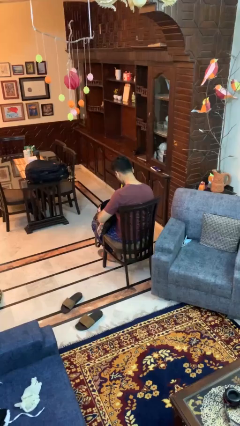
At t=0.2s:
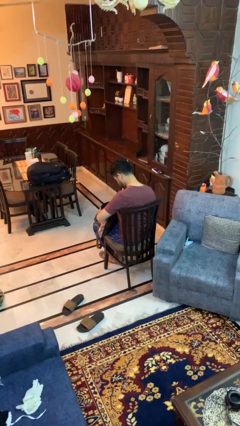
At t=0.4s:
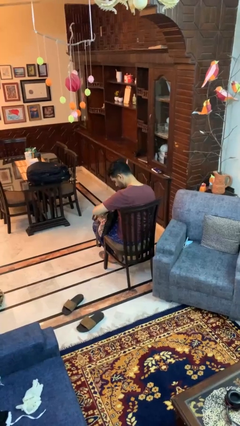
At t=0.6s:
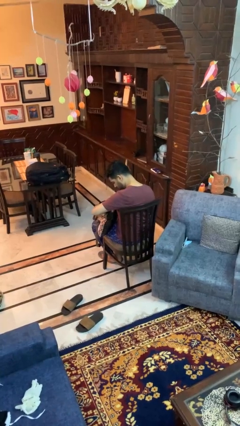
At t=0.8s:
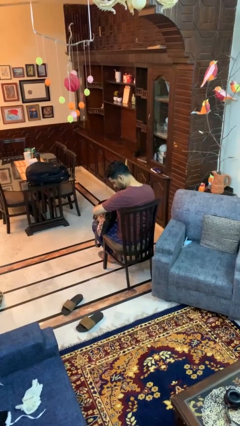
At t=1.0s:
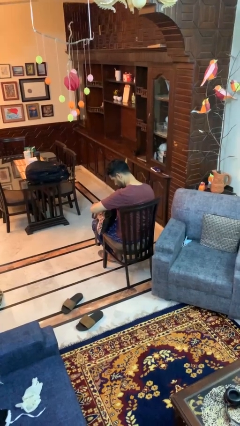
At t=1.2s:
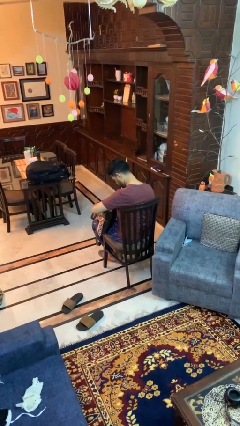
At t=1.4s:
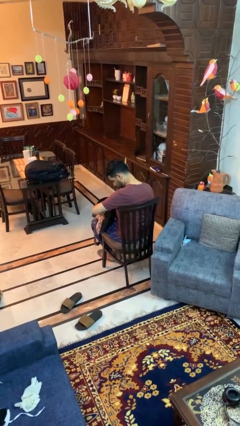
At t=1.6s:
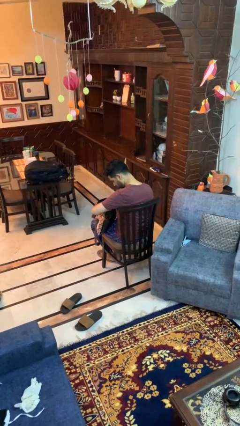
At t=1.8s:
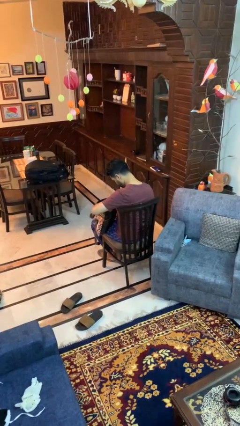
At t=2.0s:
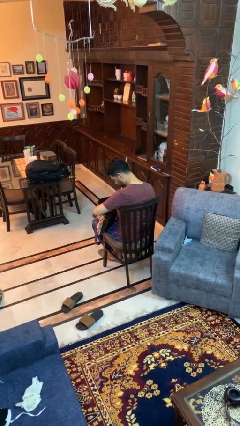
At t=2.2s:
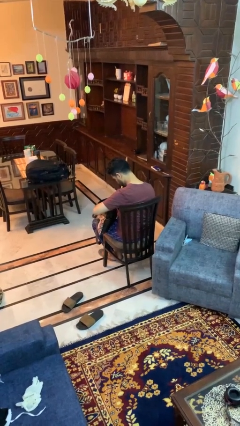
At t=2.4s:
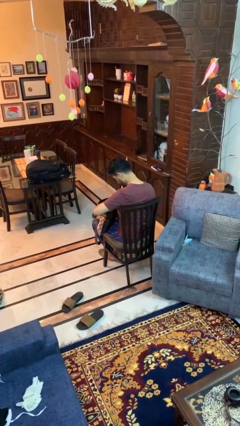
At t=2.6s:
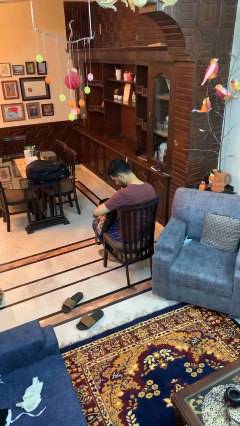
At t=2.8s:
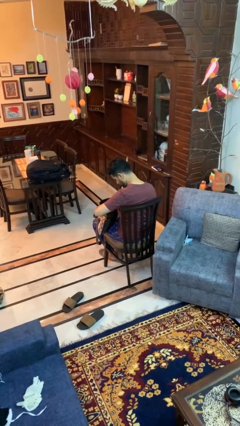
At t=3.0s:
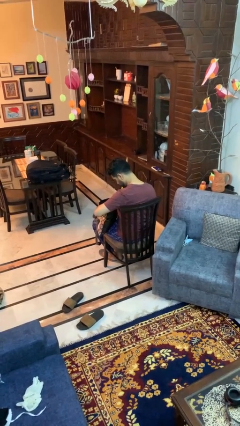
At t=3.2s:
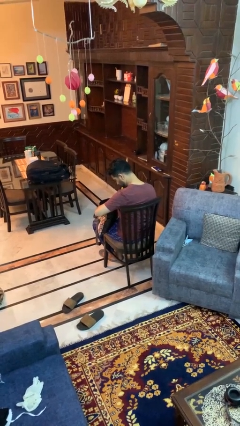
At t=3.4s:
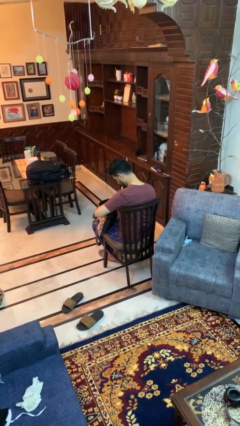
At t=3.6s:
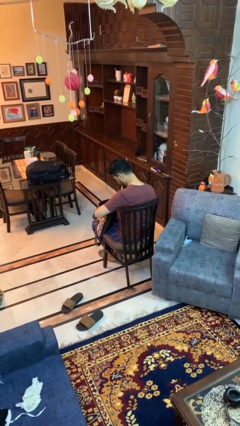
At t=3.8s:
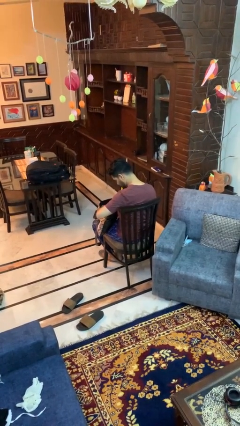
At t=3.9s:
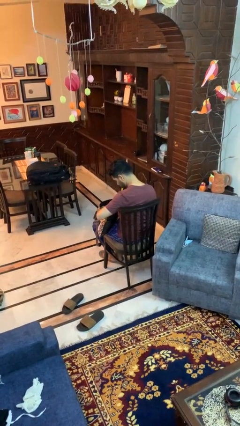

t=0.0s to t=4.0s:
person searches in purse

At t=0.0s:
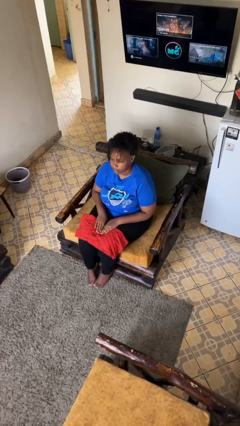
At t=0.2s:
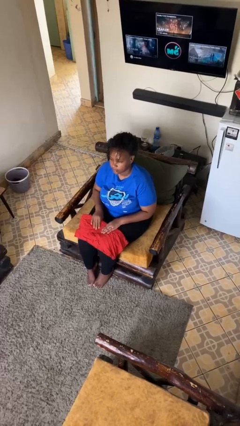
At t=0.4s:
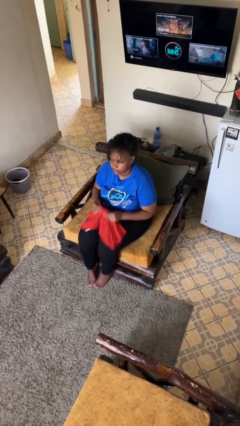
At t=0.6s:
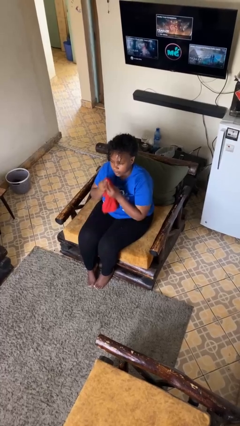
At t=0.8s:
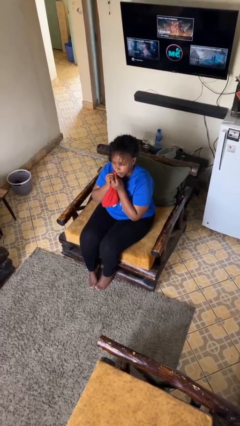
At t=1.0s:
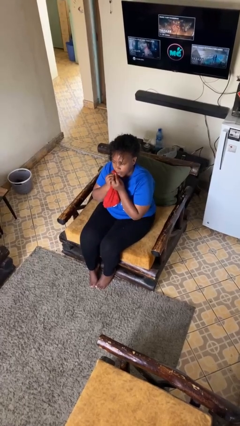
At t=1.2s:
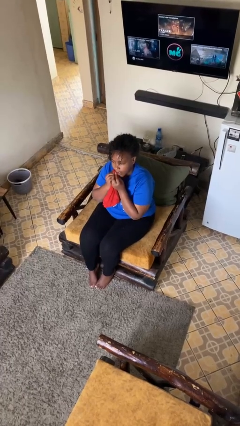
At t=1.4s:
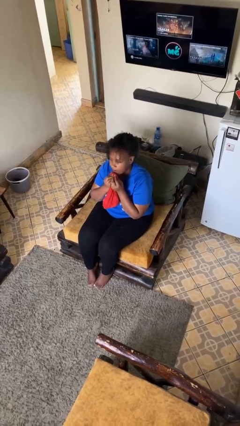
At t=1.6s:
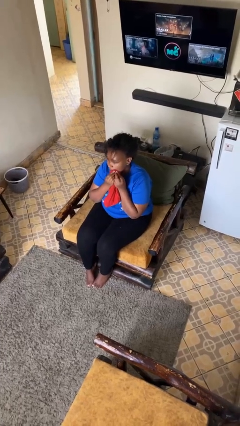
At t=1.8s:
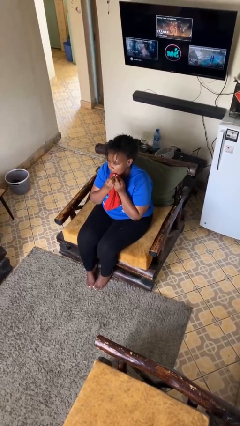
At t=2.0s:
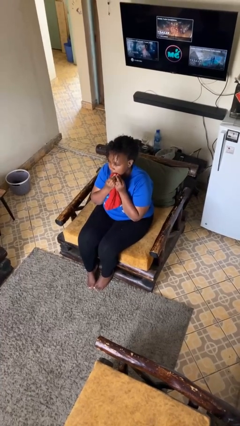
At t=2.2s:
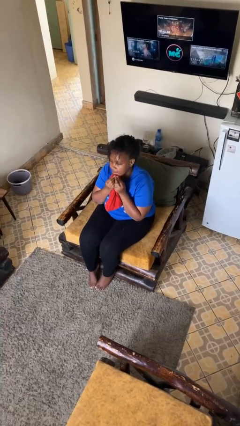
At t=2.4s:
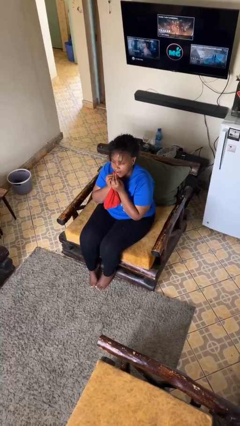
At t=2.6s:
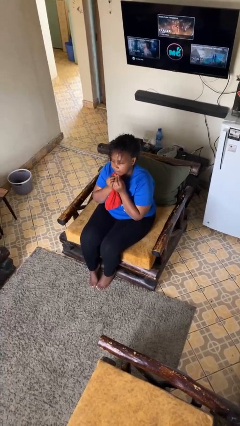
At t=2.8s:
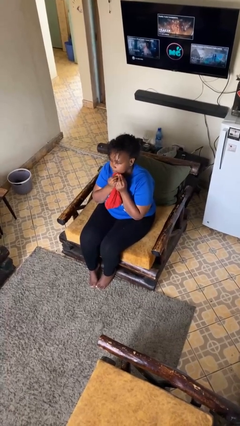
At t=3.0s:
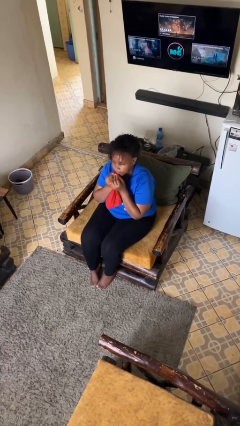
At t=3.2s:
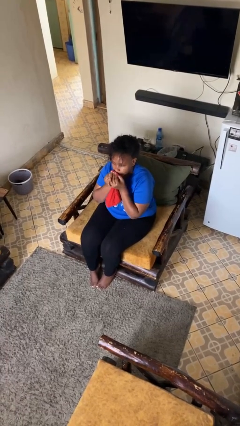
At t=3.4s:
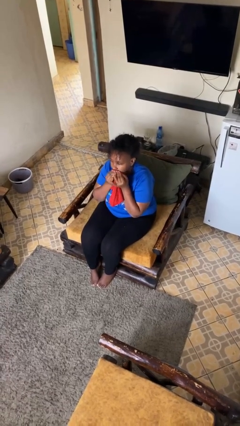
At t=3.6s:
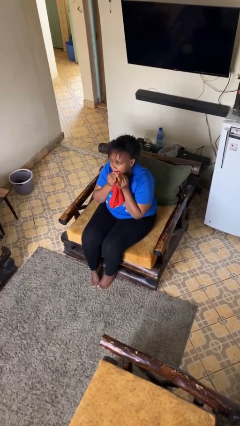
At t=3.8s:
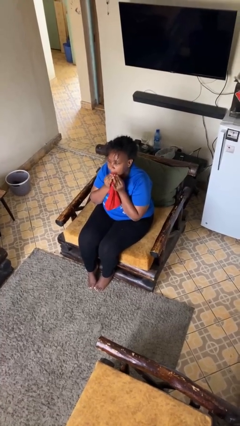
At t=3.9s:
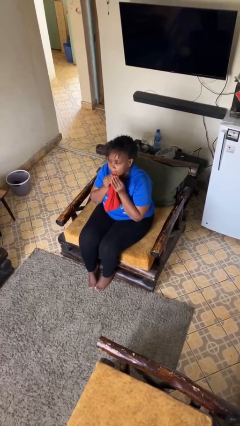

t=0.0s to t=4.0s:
person wipes mouth with napkin

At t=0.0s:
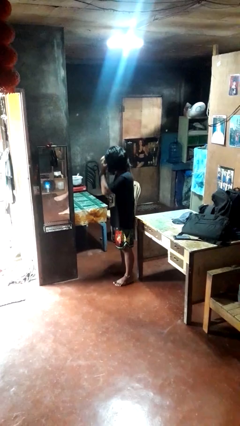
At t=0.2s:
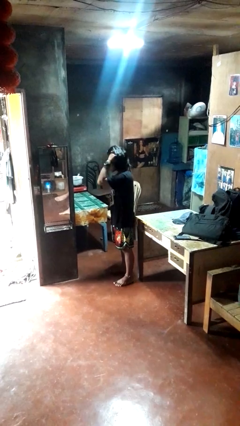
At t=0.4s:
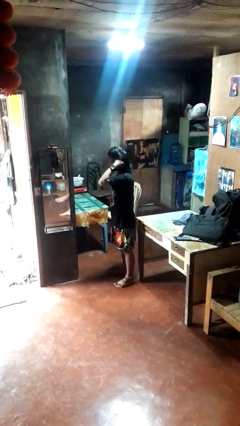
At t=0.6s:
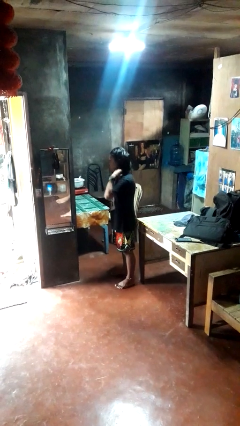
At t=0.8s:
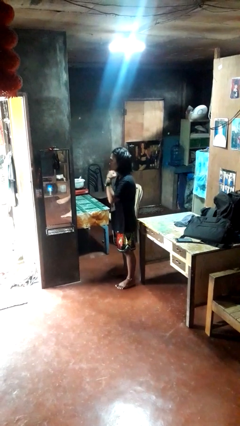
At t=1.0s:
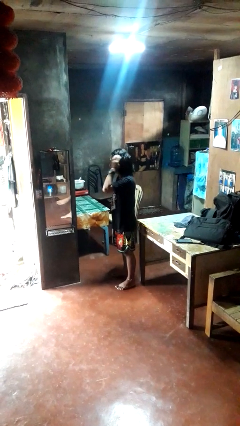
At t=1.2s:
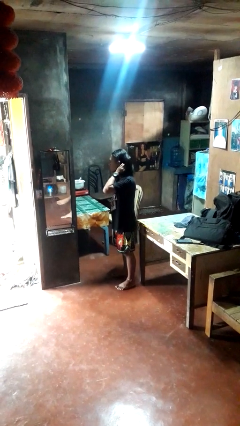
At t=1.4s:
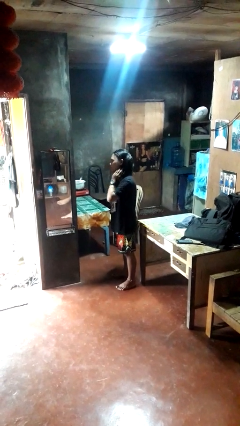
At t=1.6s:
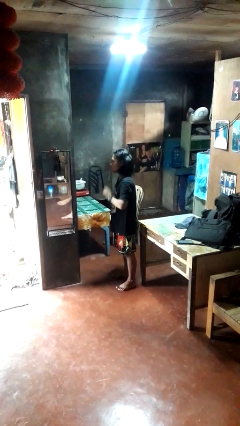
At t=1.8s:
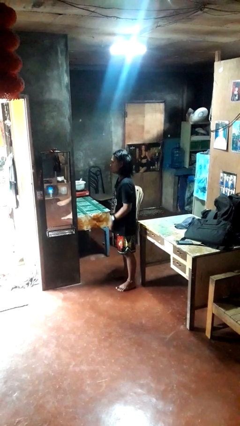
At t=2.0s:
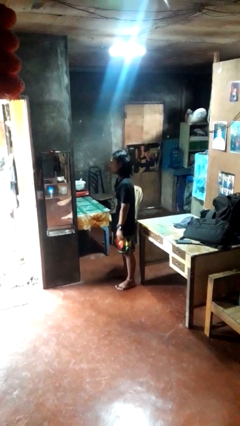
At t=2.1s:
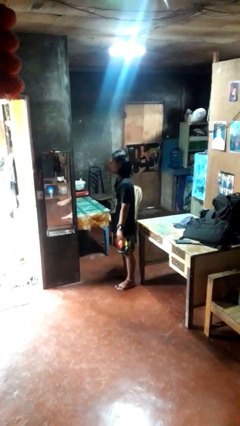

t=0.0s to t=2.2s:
person strokes hair

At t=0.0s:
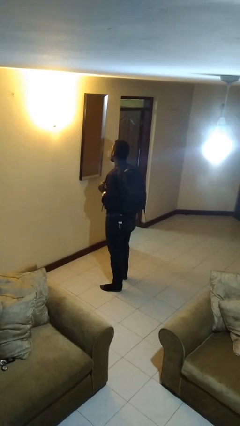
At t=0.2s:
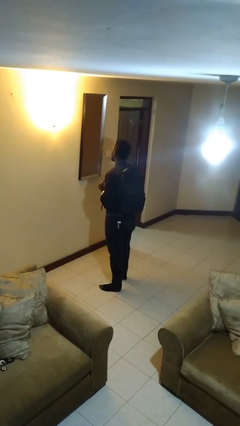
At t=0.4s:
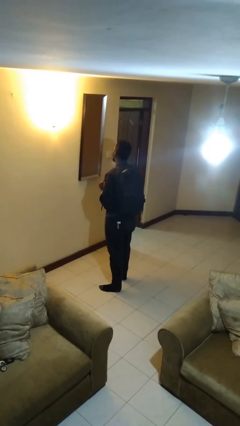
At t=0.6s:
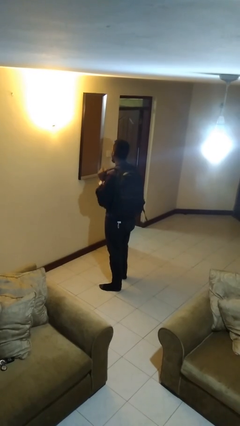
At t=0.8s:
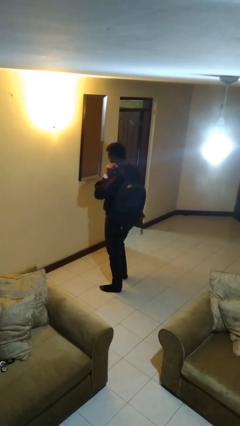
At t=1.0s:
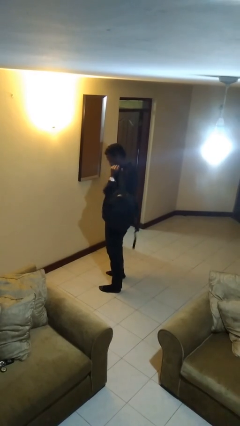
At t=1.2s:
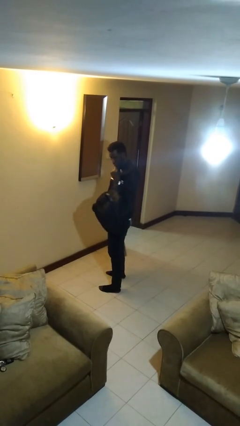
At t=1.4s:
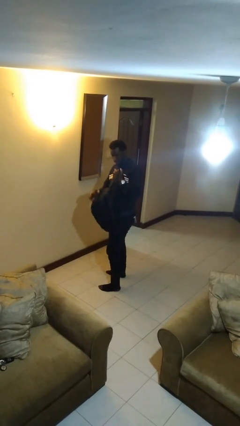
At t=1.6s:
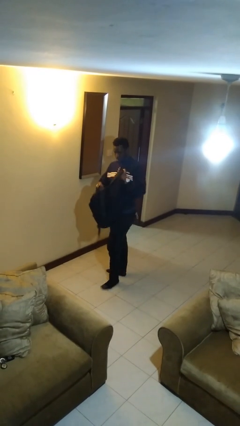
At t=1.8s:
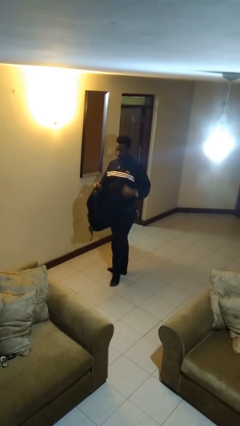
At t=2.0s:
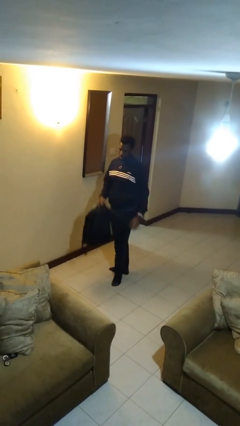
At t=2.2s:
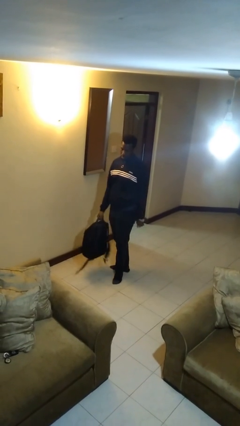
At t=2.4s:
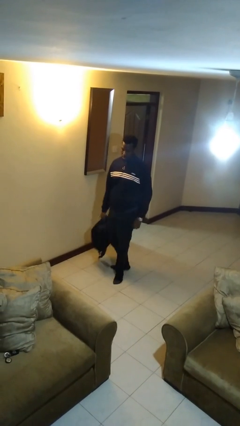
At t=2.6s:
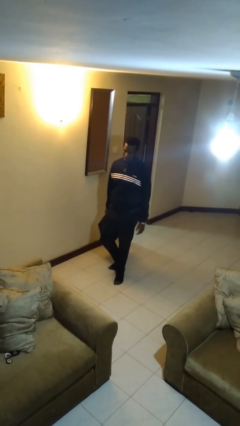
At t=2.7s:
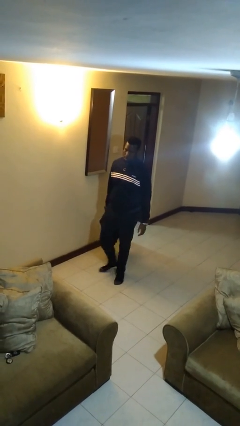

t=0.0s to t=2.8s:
person takes off backpack

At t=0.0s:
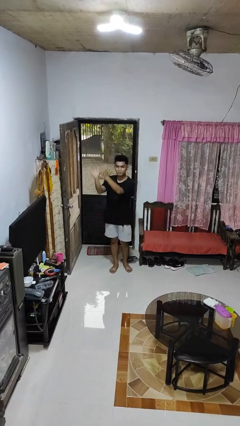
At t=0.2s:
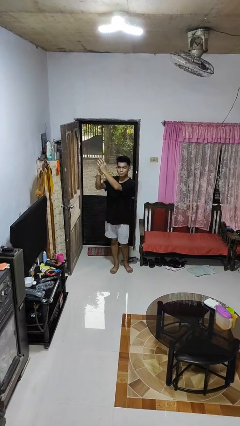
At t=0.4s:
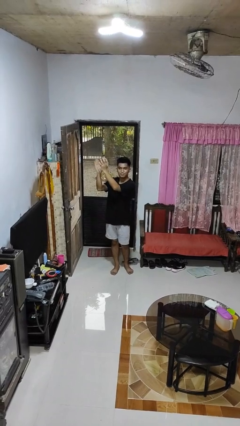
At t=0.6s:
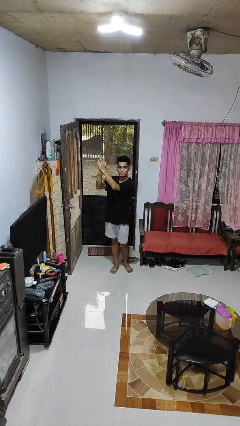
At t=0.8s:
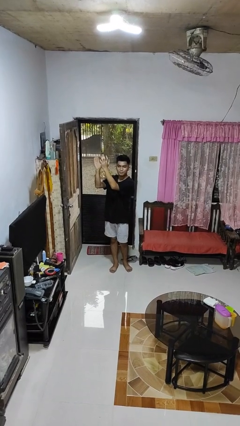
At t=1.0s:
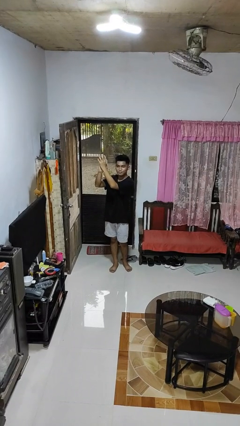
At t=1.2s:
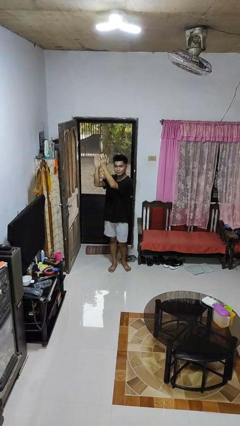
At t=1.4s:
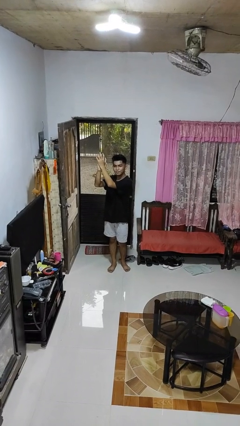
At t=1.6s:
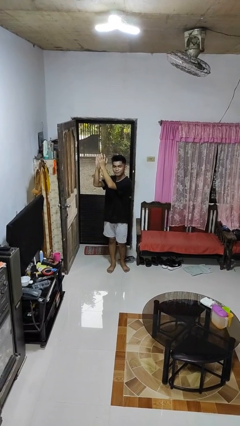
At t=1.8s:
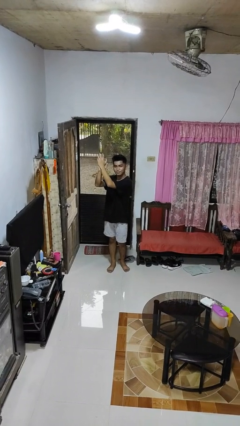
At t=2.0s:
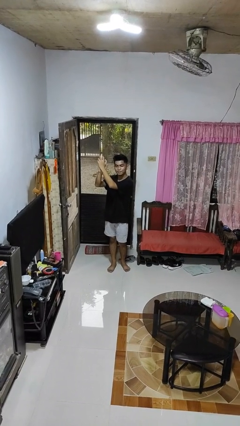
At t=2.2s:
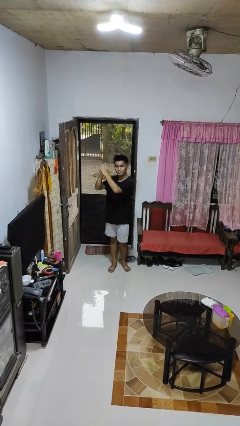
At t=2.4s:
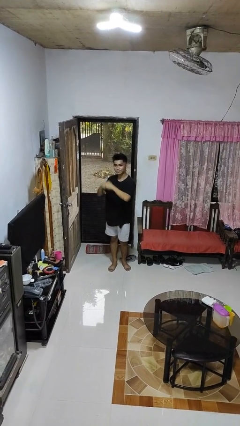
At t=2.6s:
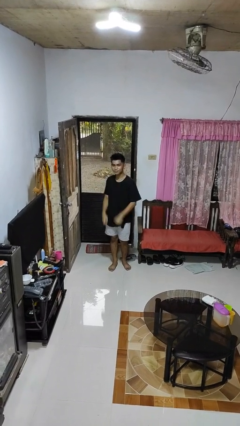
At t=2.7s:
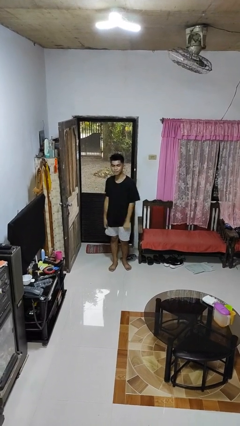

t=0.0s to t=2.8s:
person claps hands

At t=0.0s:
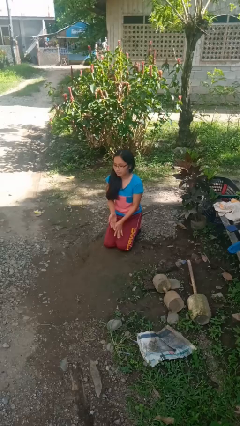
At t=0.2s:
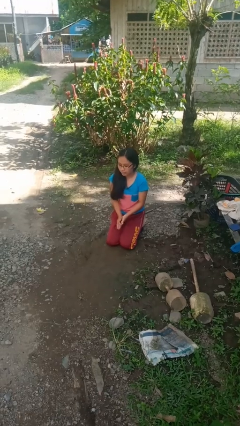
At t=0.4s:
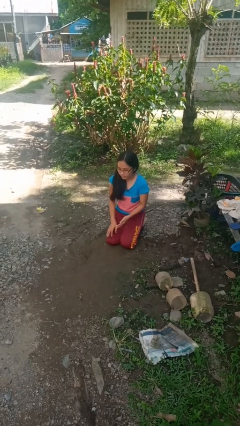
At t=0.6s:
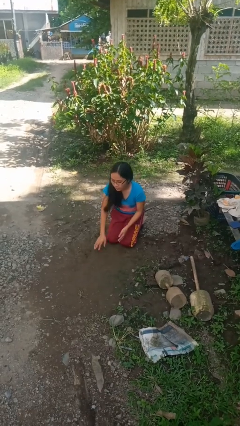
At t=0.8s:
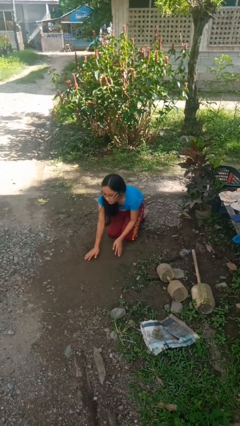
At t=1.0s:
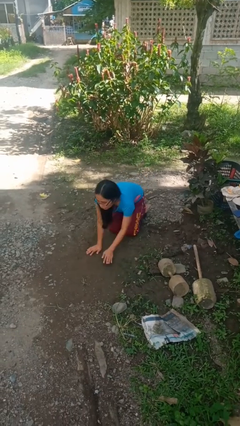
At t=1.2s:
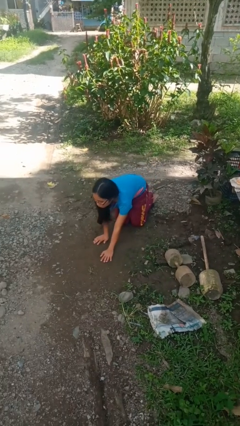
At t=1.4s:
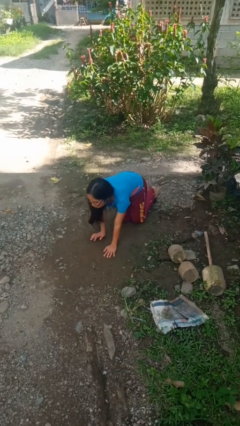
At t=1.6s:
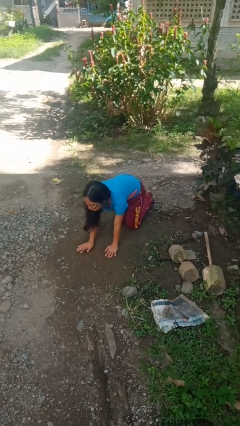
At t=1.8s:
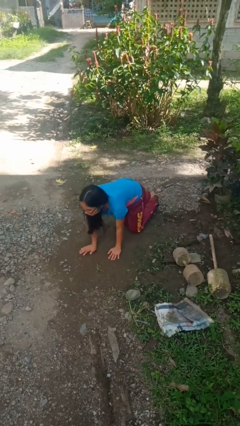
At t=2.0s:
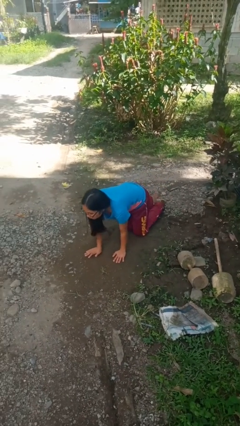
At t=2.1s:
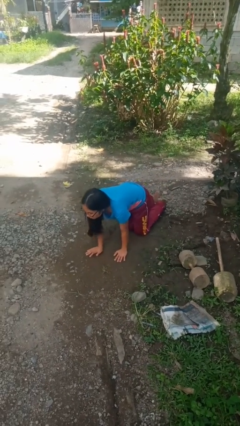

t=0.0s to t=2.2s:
person crawls
